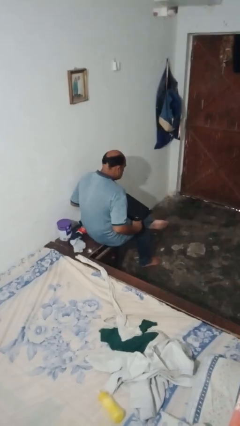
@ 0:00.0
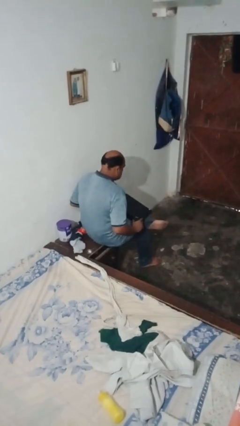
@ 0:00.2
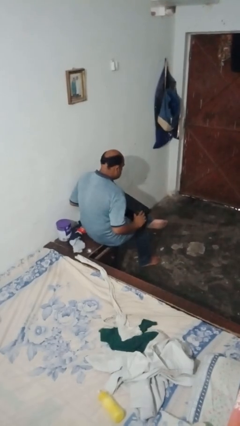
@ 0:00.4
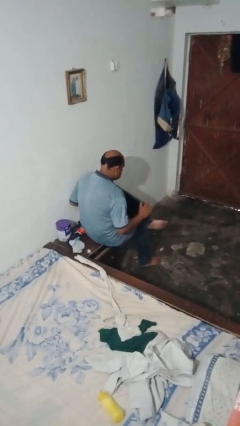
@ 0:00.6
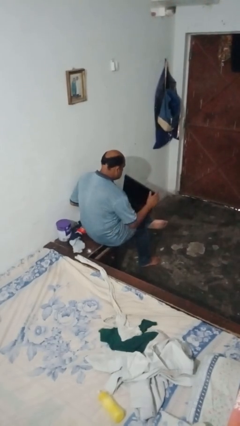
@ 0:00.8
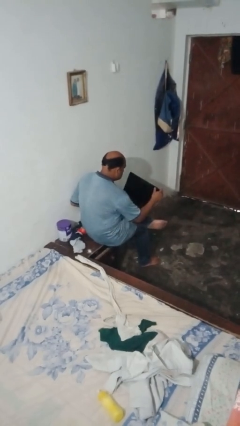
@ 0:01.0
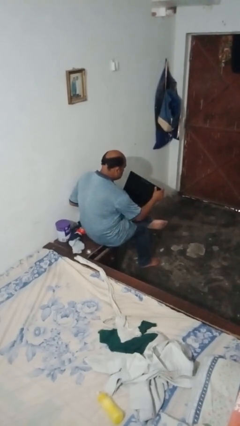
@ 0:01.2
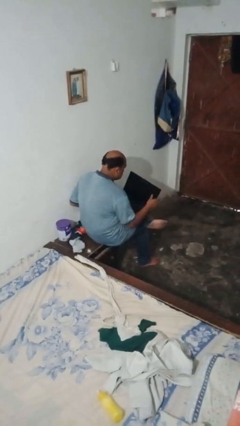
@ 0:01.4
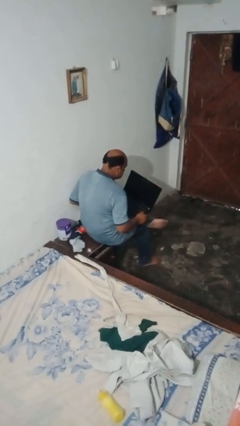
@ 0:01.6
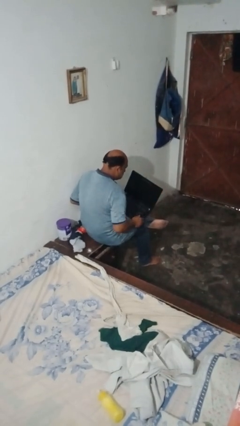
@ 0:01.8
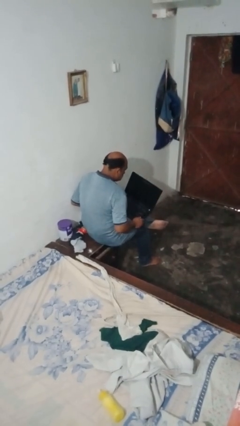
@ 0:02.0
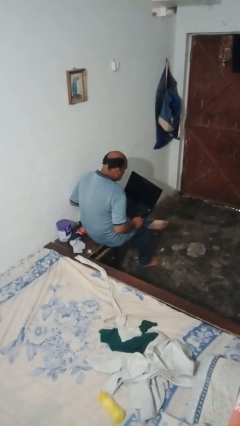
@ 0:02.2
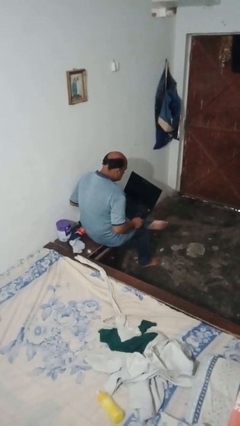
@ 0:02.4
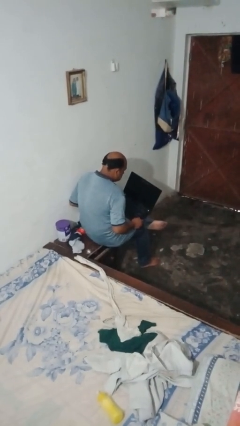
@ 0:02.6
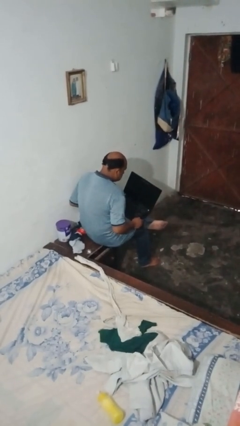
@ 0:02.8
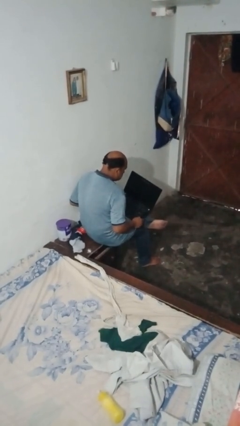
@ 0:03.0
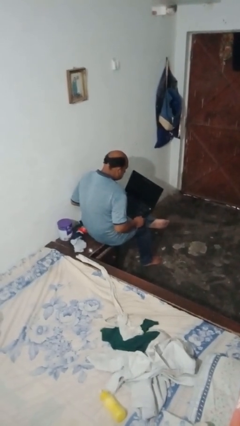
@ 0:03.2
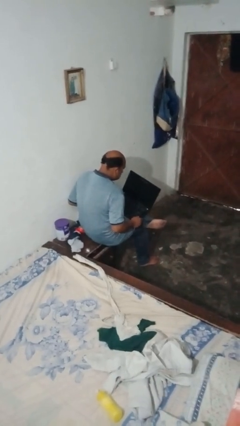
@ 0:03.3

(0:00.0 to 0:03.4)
person opens laptop

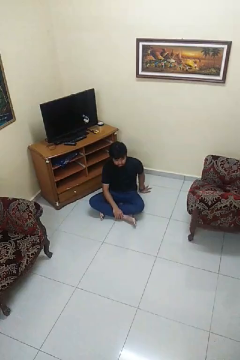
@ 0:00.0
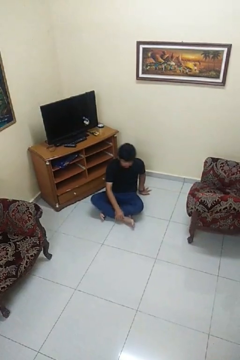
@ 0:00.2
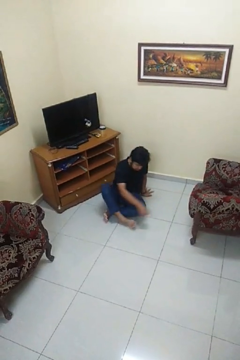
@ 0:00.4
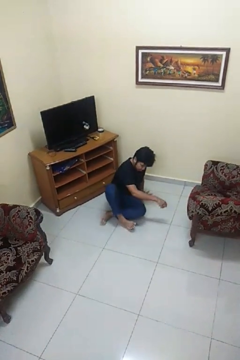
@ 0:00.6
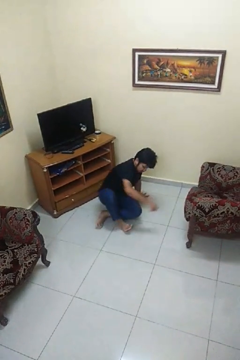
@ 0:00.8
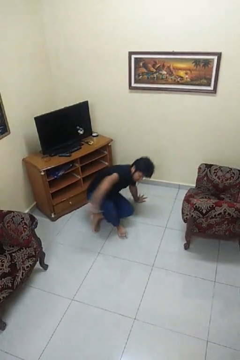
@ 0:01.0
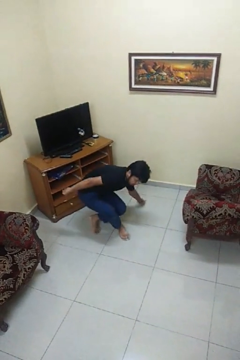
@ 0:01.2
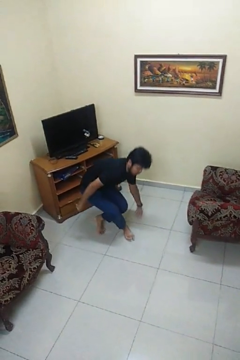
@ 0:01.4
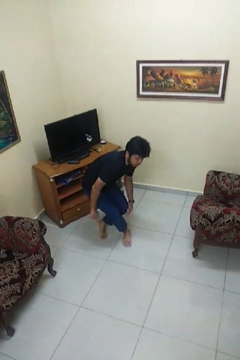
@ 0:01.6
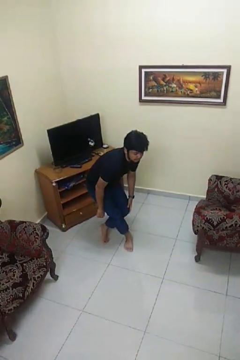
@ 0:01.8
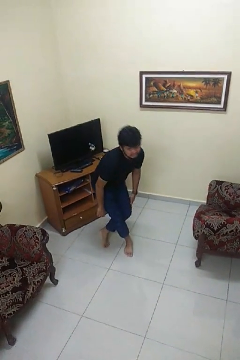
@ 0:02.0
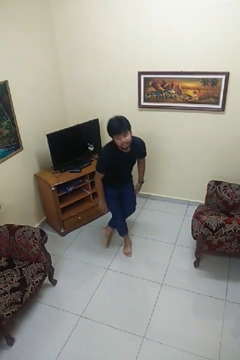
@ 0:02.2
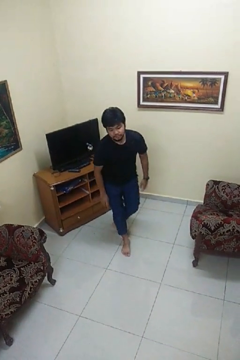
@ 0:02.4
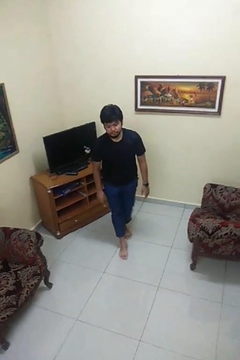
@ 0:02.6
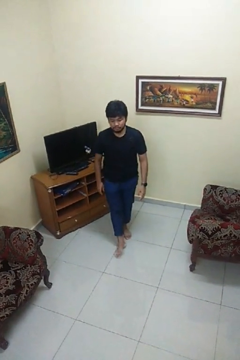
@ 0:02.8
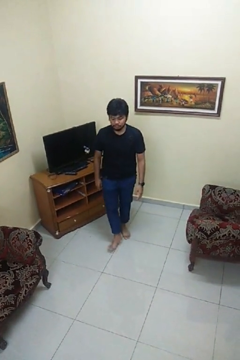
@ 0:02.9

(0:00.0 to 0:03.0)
person stands up from floor

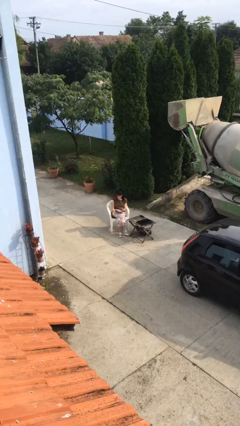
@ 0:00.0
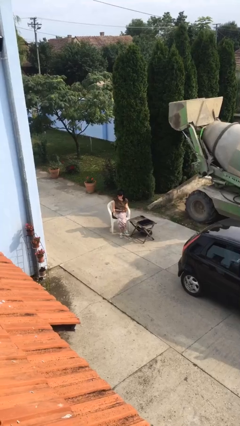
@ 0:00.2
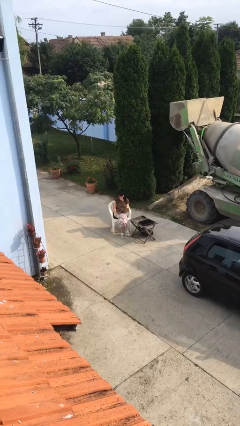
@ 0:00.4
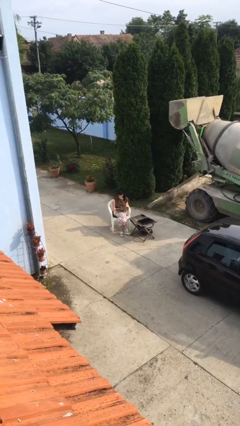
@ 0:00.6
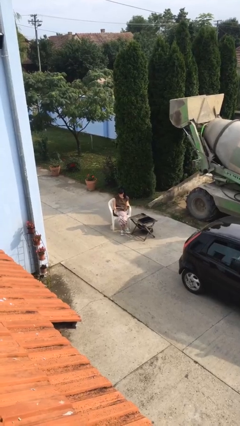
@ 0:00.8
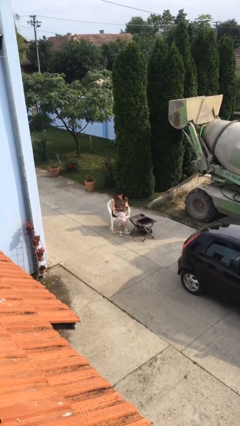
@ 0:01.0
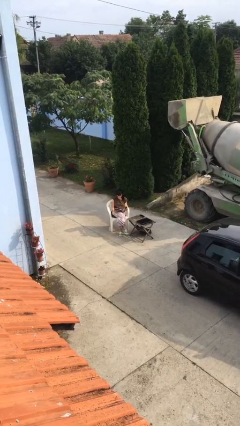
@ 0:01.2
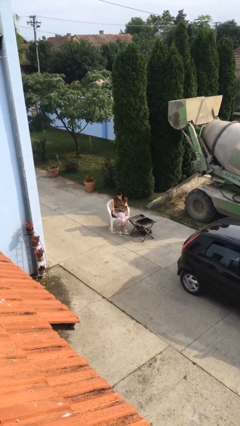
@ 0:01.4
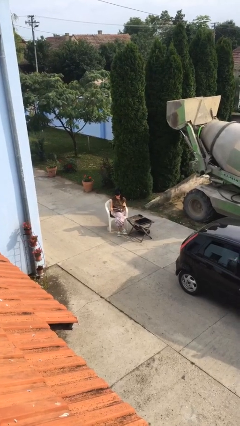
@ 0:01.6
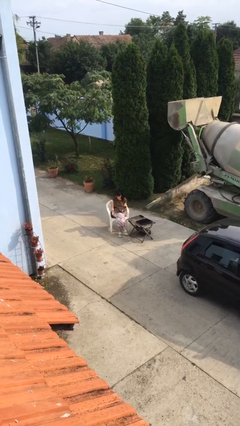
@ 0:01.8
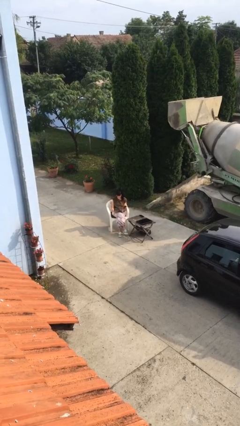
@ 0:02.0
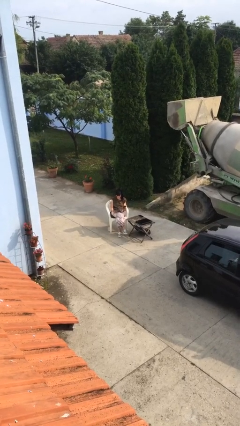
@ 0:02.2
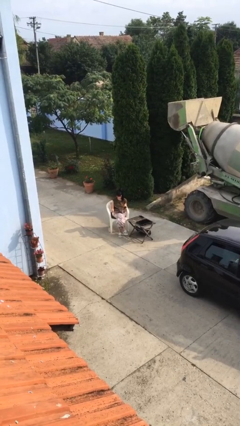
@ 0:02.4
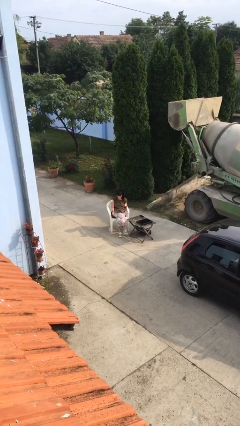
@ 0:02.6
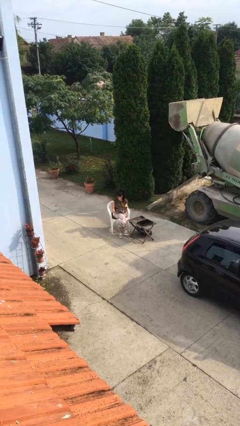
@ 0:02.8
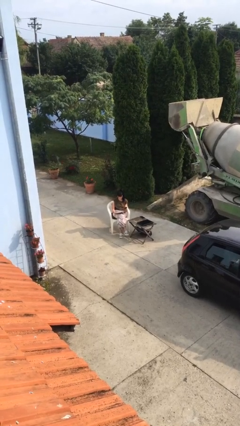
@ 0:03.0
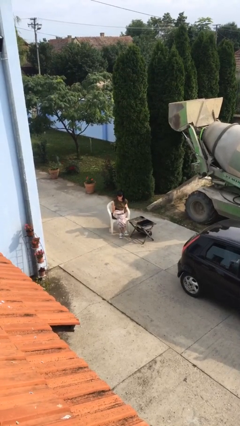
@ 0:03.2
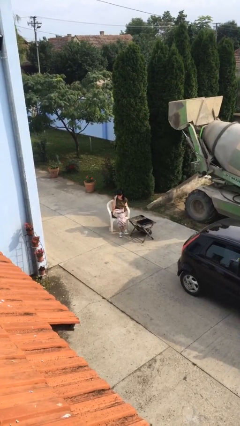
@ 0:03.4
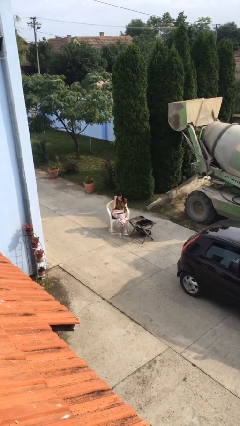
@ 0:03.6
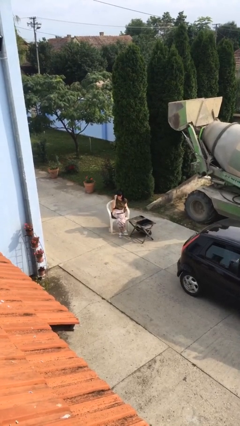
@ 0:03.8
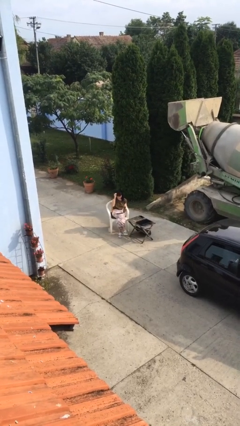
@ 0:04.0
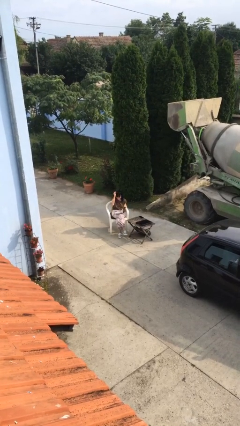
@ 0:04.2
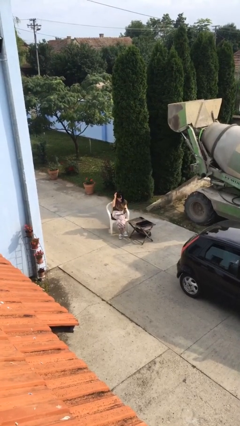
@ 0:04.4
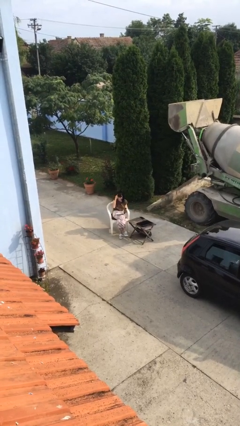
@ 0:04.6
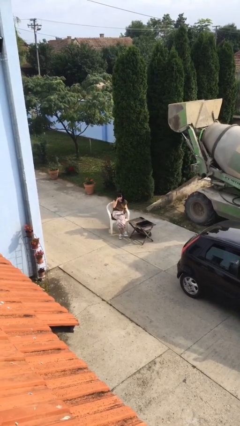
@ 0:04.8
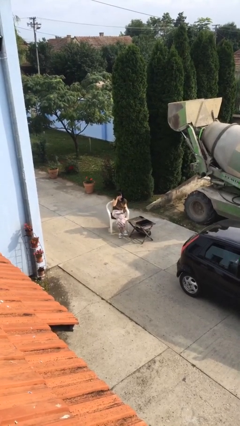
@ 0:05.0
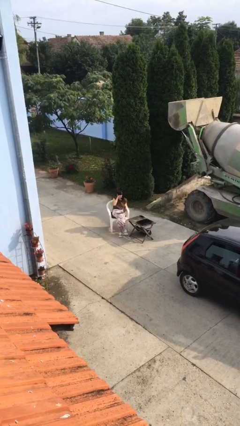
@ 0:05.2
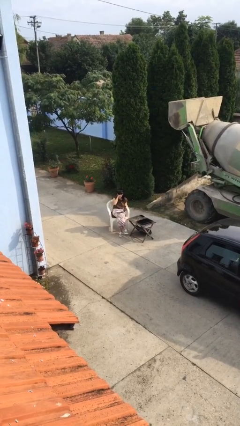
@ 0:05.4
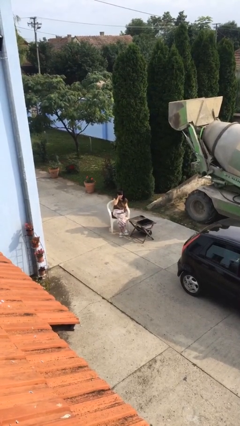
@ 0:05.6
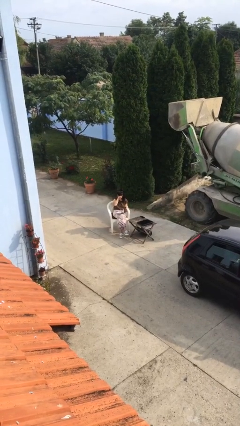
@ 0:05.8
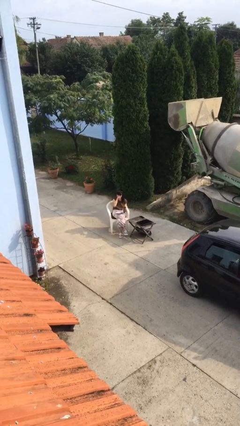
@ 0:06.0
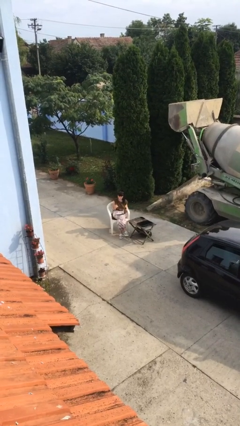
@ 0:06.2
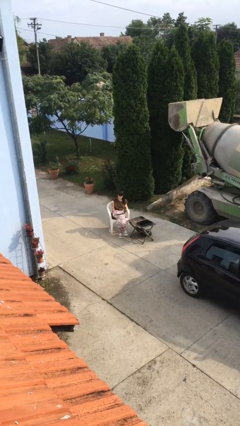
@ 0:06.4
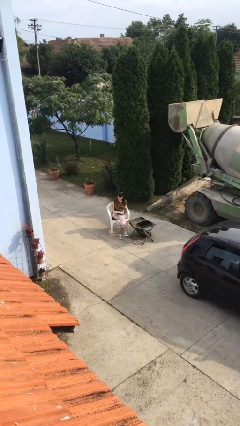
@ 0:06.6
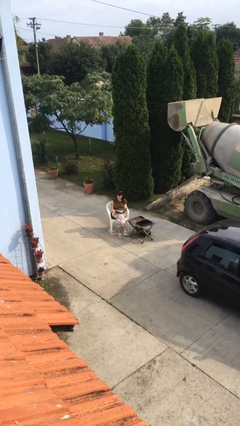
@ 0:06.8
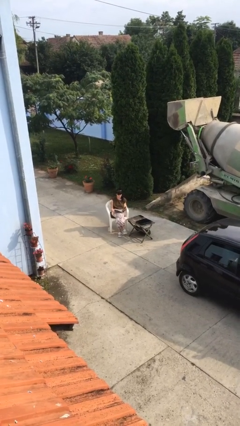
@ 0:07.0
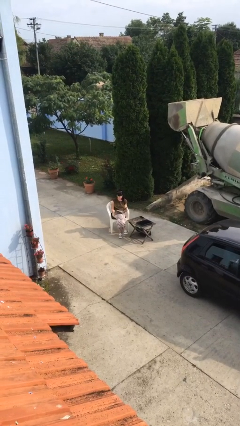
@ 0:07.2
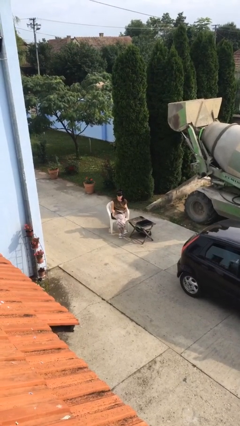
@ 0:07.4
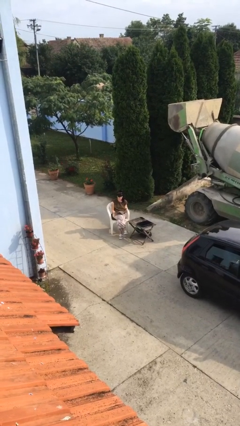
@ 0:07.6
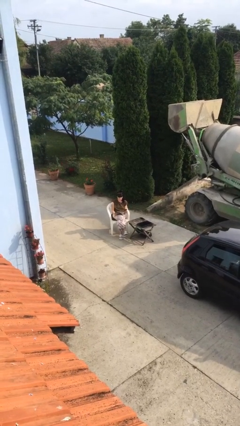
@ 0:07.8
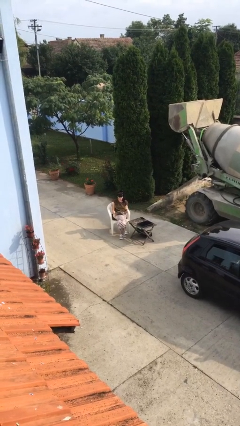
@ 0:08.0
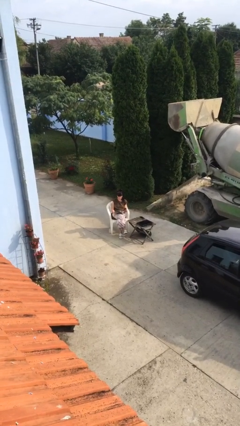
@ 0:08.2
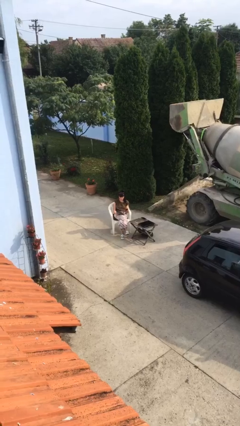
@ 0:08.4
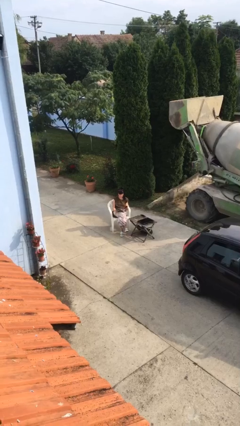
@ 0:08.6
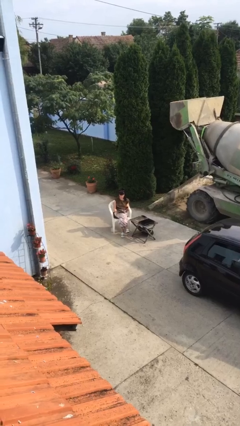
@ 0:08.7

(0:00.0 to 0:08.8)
person reads document

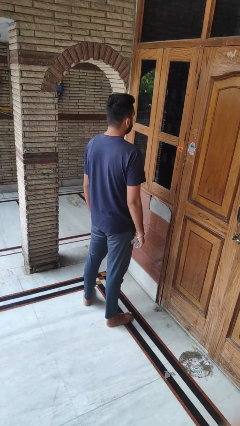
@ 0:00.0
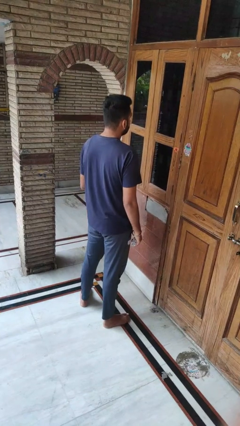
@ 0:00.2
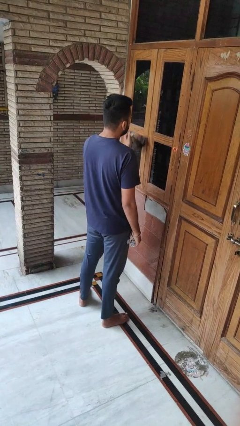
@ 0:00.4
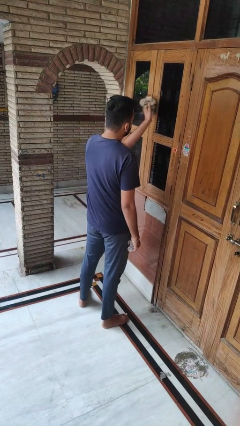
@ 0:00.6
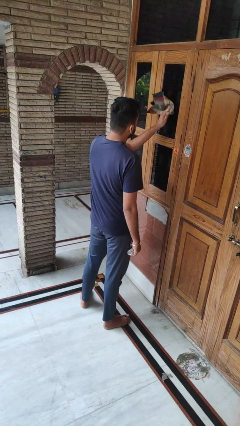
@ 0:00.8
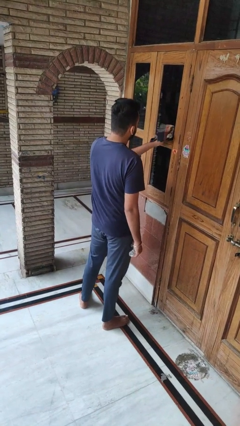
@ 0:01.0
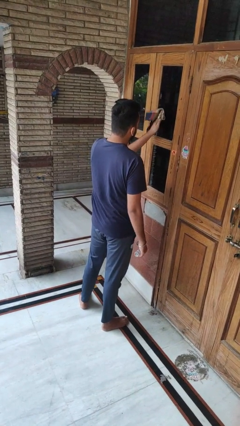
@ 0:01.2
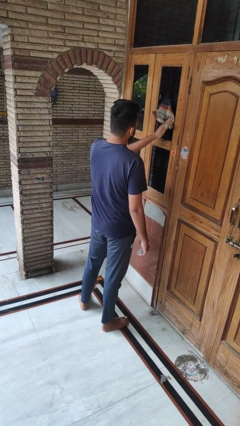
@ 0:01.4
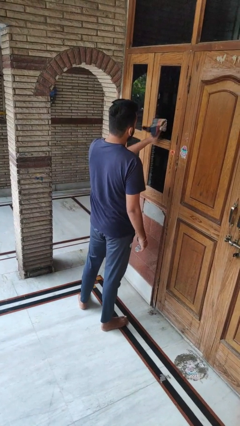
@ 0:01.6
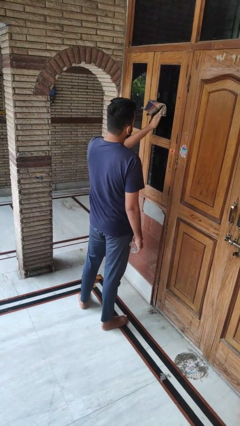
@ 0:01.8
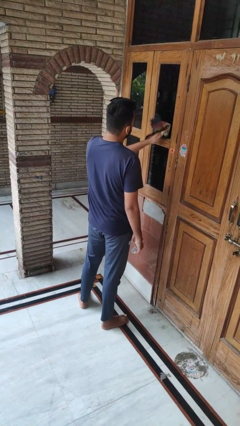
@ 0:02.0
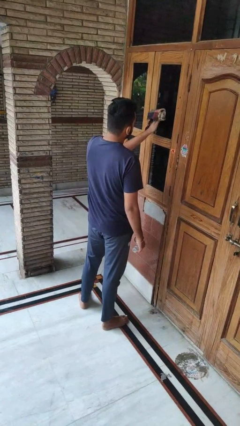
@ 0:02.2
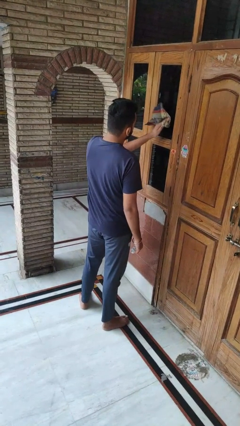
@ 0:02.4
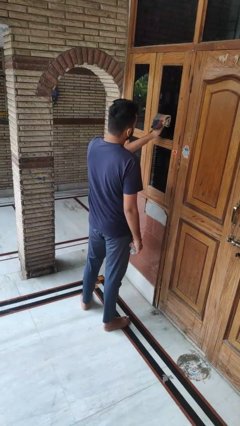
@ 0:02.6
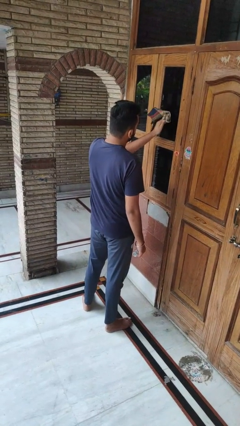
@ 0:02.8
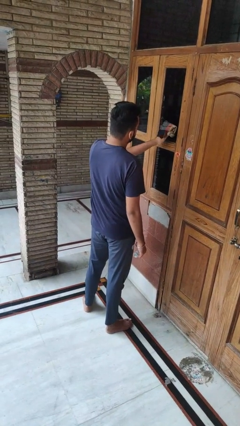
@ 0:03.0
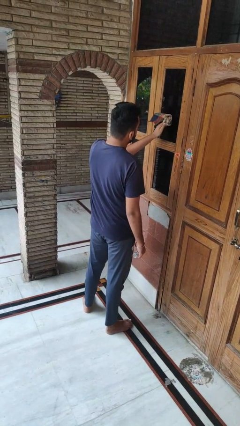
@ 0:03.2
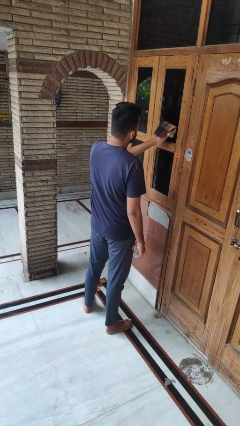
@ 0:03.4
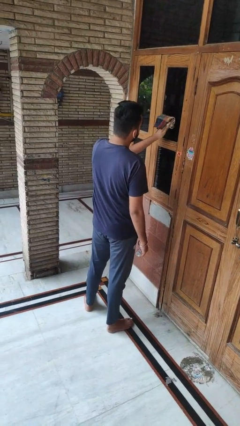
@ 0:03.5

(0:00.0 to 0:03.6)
person washes window
